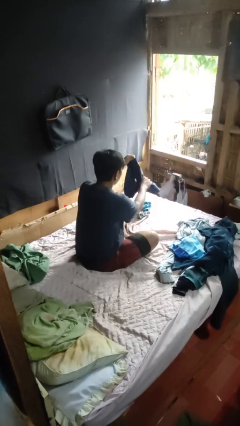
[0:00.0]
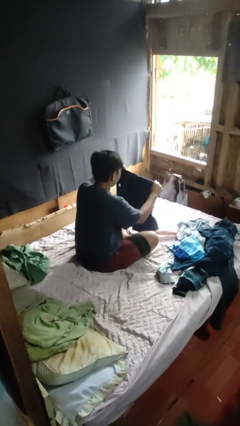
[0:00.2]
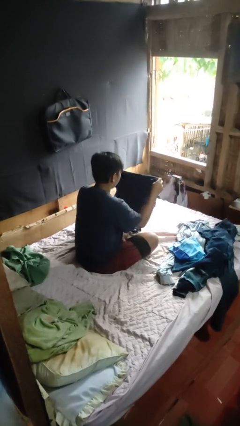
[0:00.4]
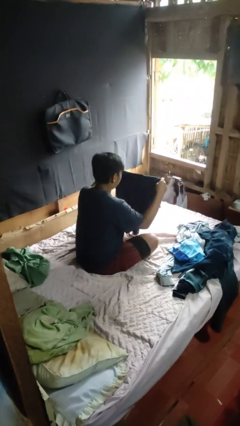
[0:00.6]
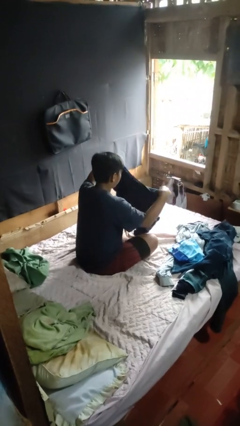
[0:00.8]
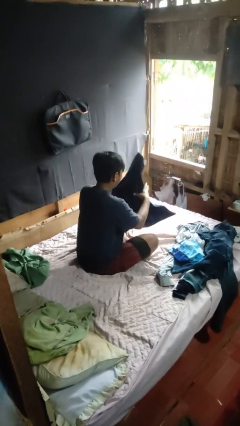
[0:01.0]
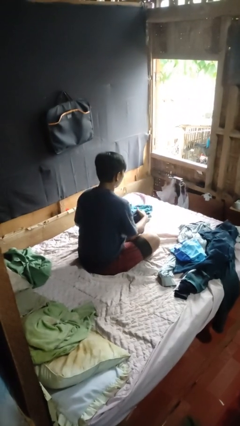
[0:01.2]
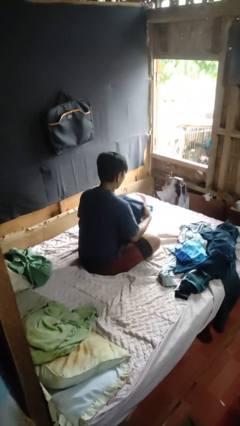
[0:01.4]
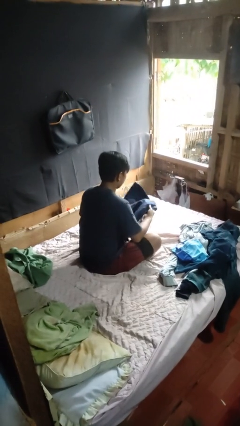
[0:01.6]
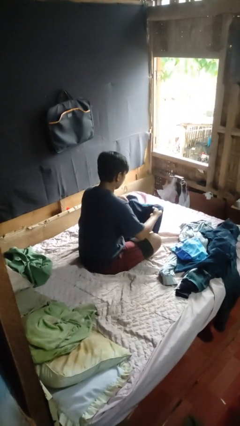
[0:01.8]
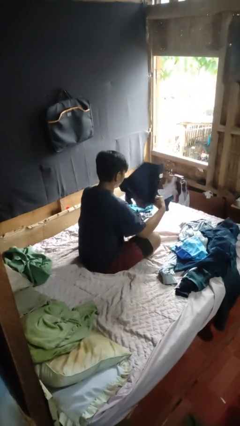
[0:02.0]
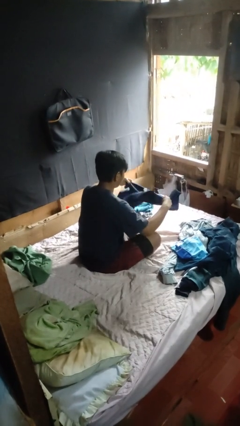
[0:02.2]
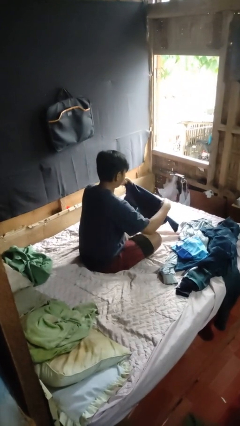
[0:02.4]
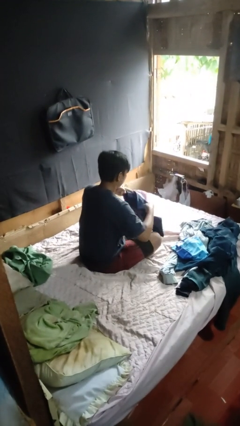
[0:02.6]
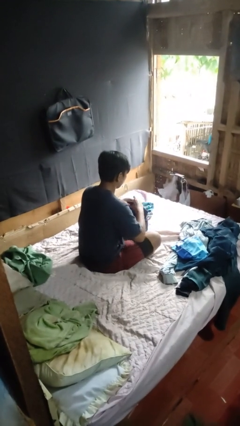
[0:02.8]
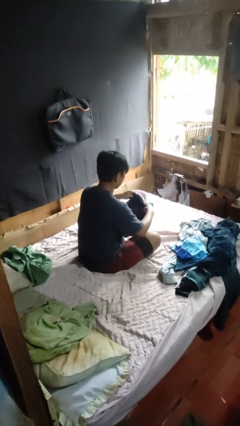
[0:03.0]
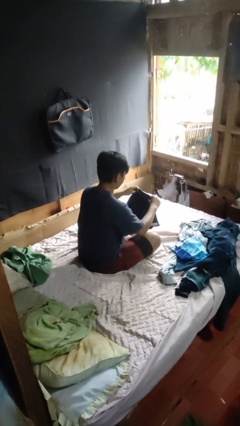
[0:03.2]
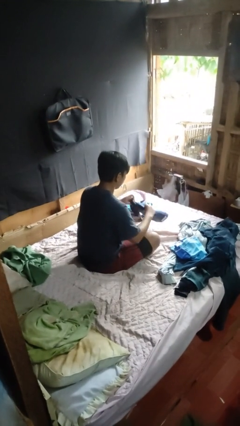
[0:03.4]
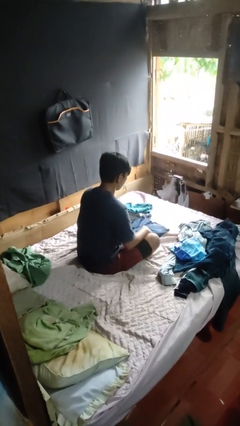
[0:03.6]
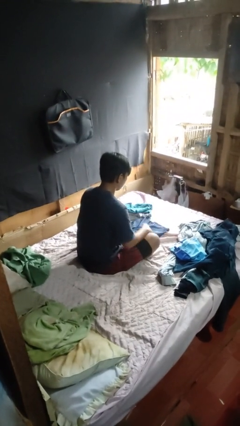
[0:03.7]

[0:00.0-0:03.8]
person folds shirt

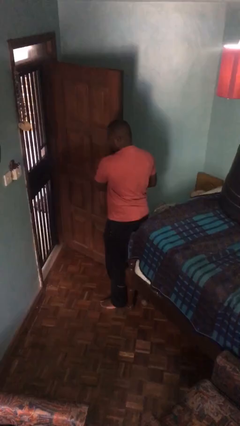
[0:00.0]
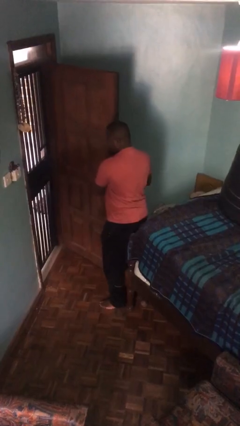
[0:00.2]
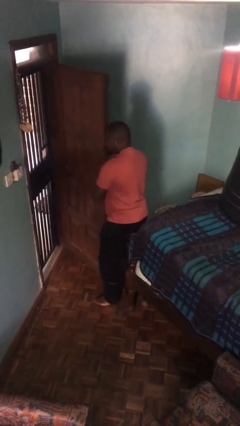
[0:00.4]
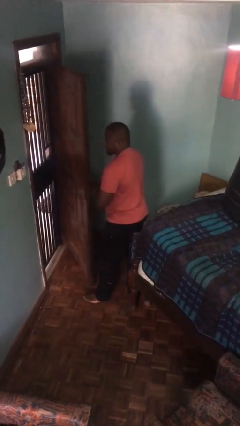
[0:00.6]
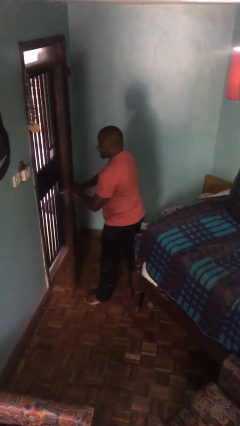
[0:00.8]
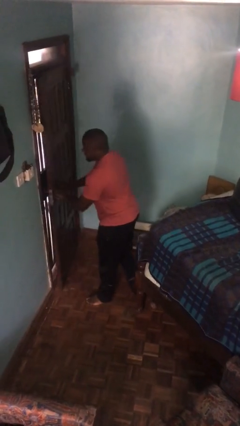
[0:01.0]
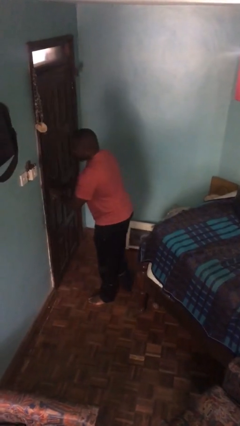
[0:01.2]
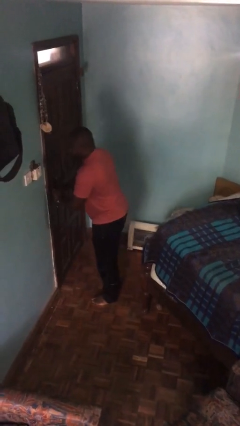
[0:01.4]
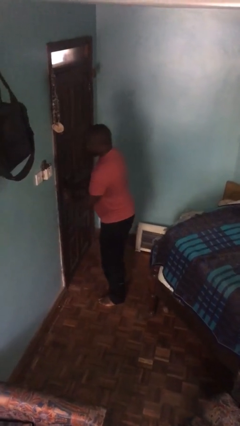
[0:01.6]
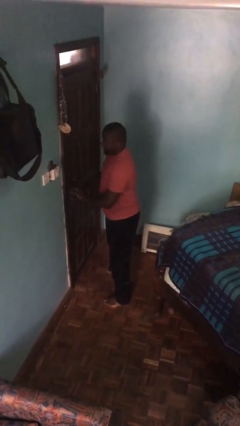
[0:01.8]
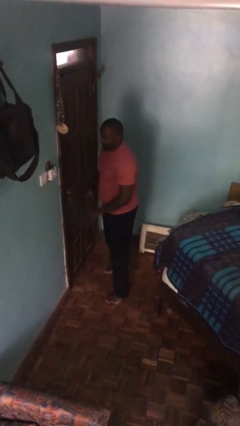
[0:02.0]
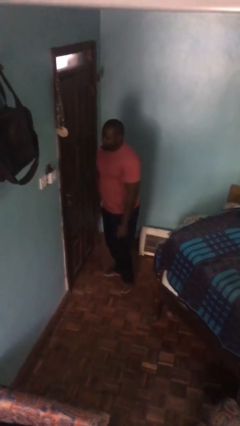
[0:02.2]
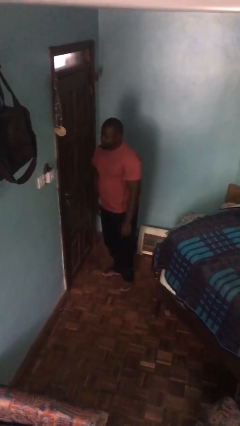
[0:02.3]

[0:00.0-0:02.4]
person closes facility door

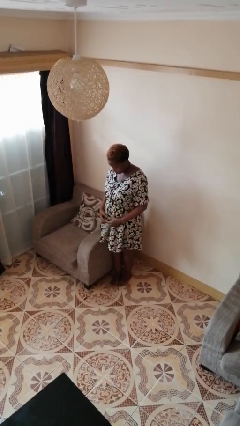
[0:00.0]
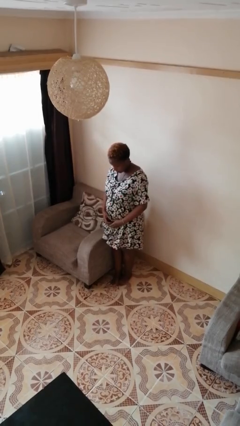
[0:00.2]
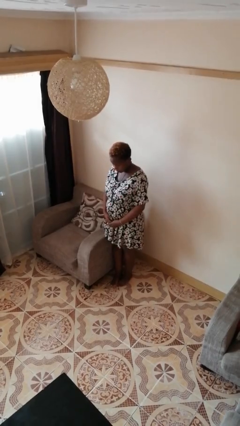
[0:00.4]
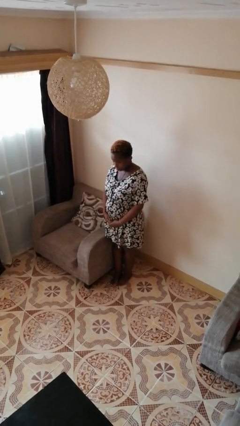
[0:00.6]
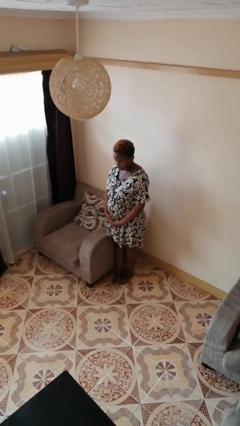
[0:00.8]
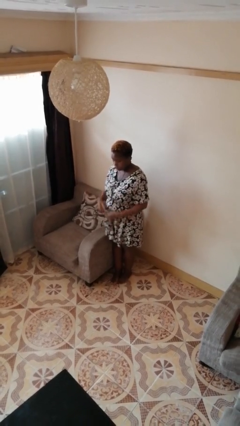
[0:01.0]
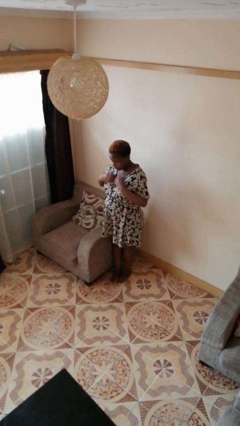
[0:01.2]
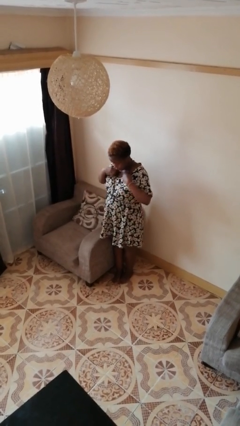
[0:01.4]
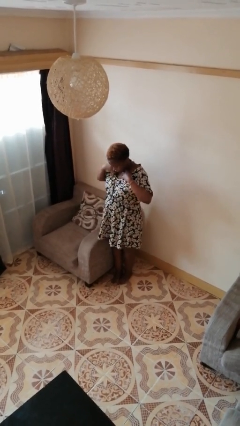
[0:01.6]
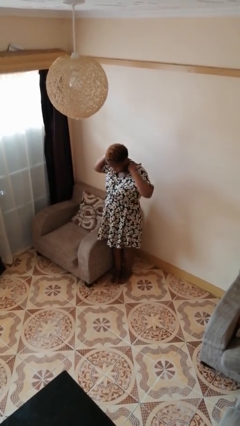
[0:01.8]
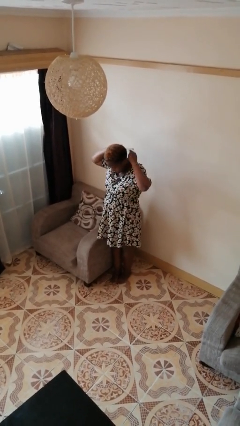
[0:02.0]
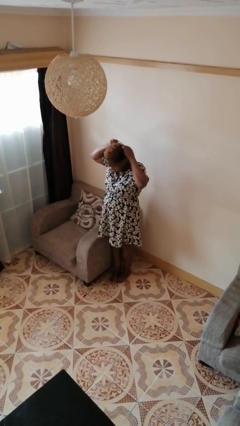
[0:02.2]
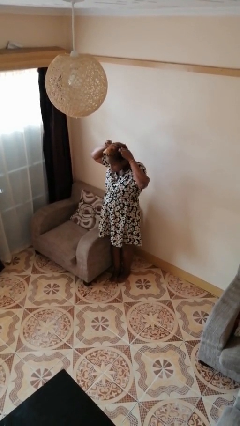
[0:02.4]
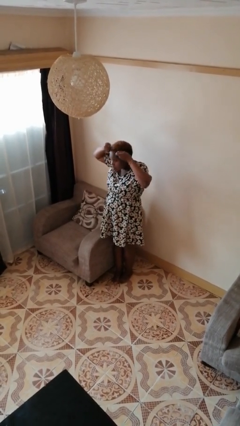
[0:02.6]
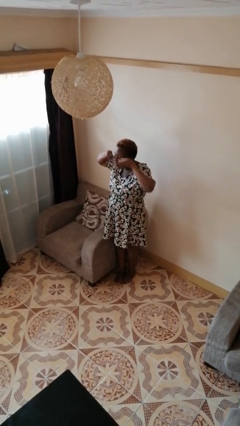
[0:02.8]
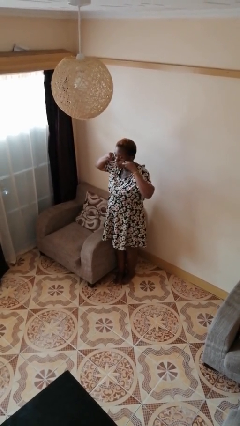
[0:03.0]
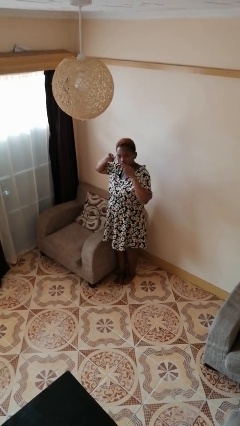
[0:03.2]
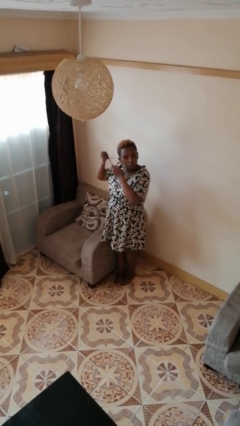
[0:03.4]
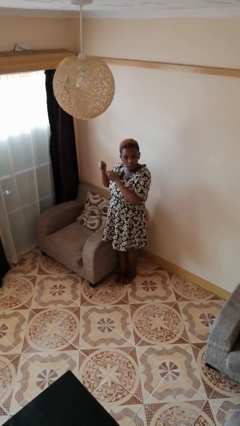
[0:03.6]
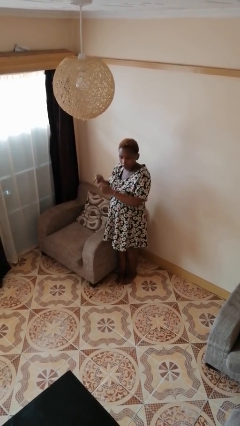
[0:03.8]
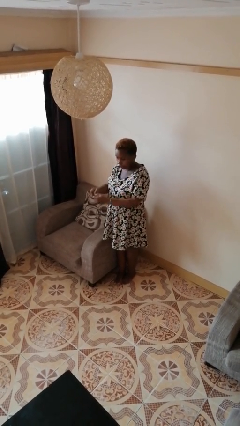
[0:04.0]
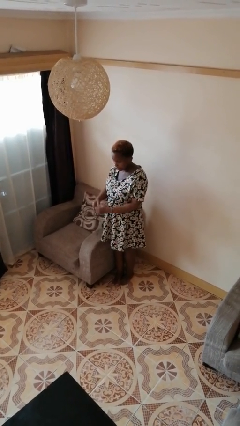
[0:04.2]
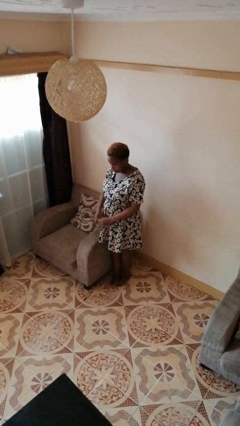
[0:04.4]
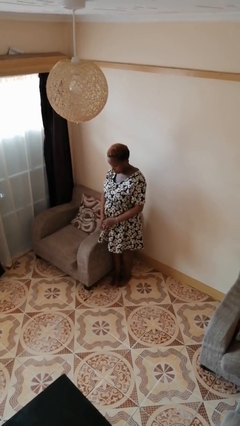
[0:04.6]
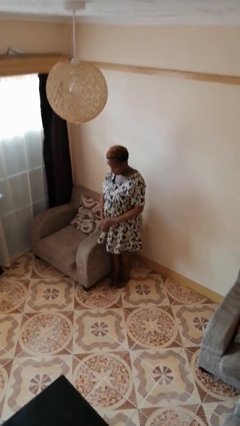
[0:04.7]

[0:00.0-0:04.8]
person takes off necklace

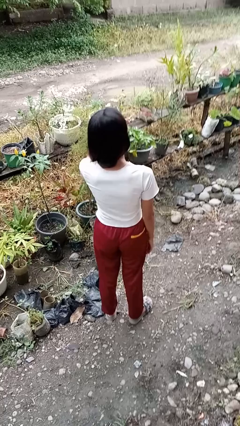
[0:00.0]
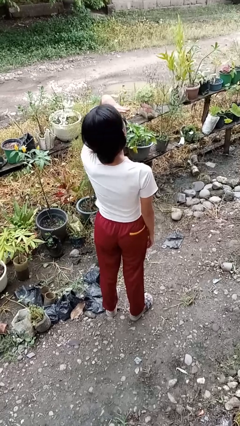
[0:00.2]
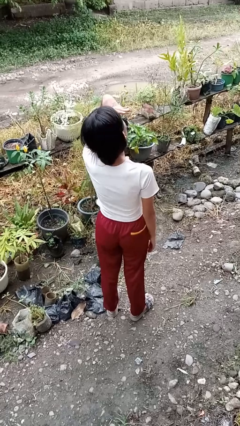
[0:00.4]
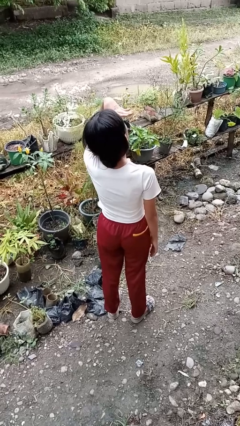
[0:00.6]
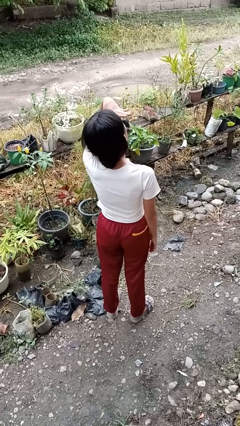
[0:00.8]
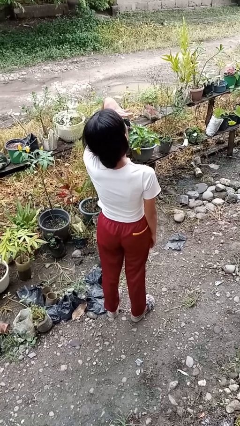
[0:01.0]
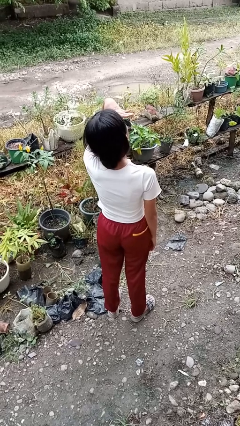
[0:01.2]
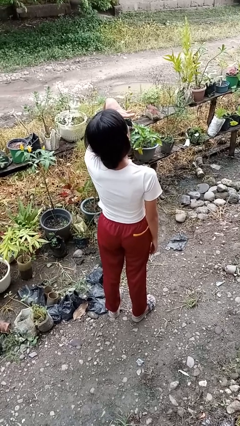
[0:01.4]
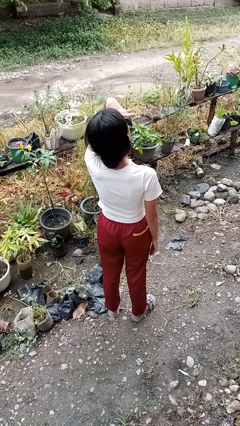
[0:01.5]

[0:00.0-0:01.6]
person shades eyes

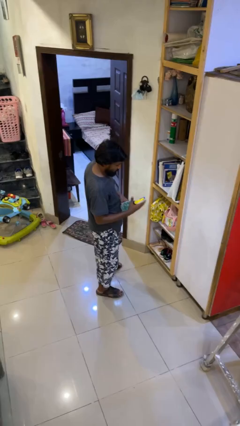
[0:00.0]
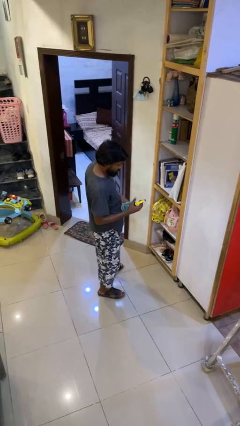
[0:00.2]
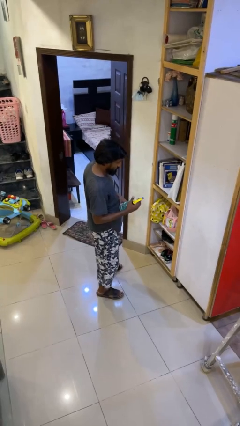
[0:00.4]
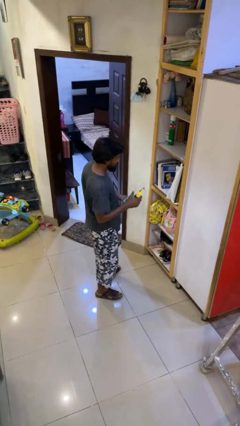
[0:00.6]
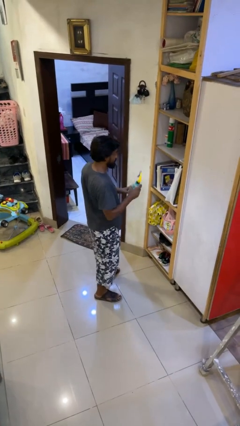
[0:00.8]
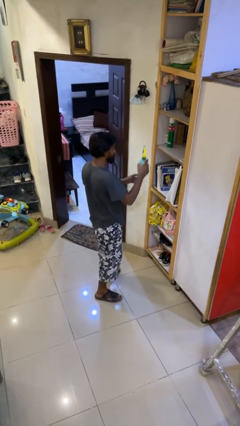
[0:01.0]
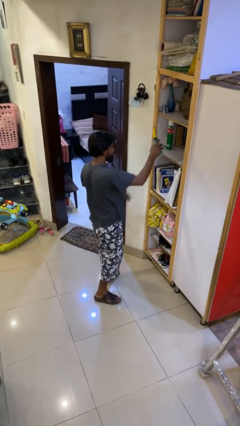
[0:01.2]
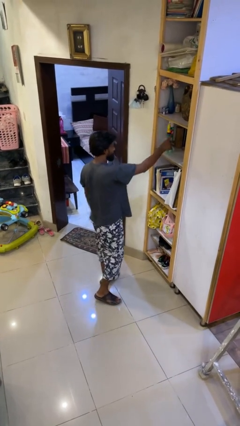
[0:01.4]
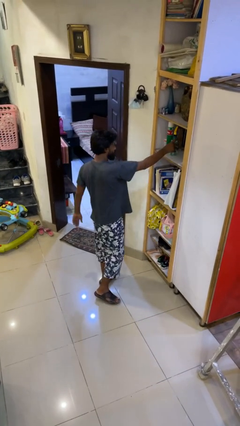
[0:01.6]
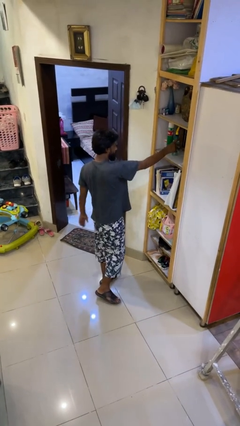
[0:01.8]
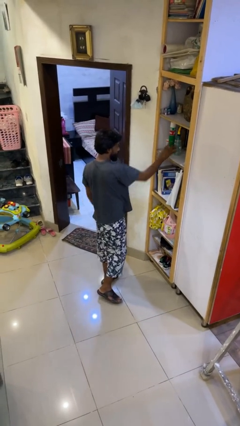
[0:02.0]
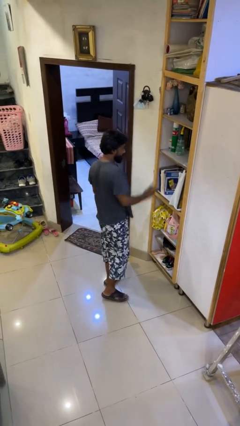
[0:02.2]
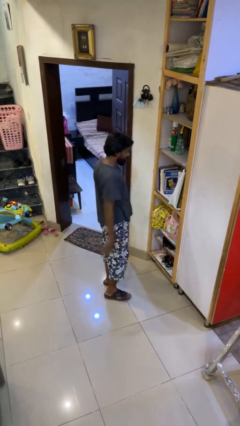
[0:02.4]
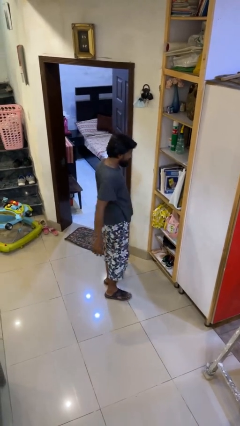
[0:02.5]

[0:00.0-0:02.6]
person puts down object into cabinet

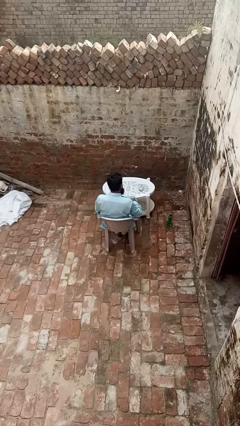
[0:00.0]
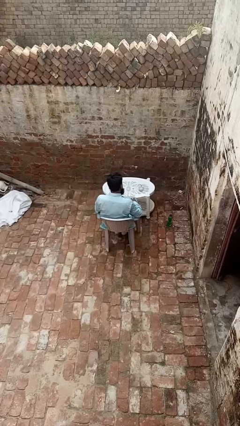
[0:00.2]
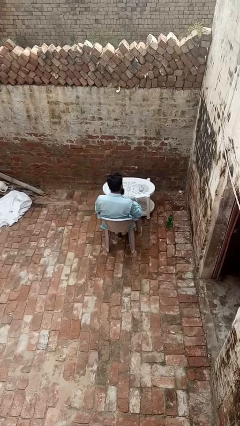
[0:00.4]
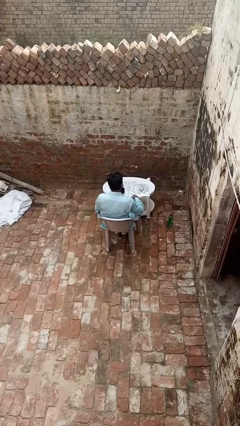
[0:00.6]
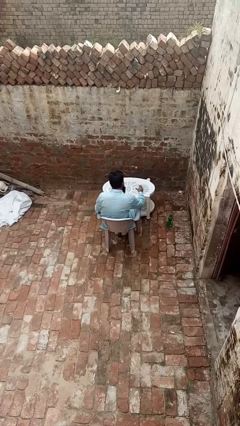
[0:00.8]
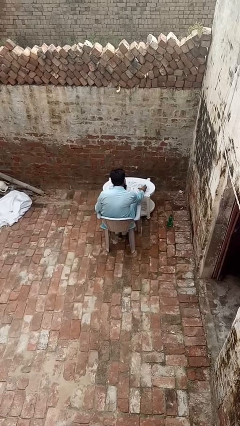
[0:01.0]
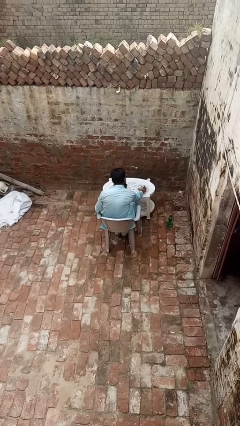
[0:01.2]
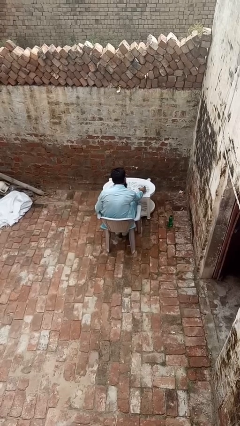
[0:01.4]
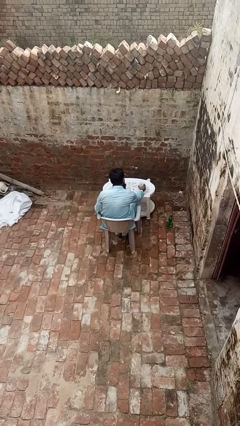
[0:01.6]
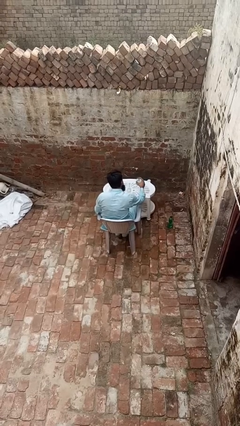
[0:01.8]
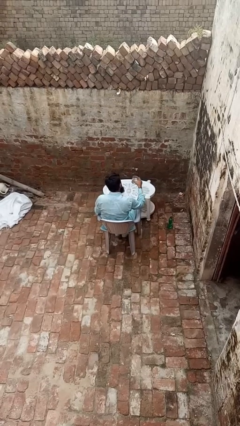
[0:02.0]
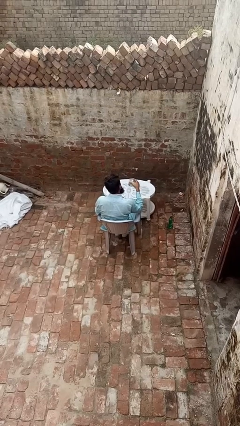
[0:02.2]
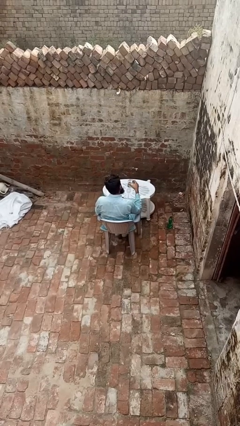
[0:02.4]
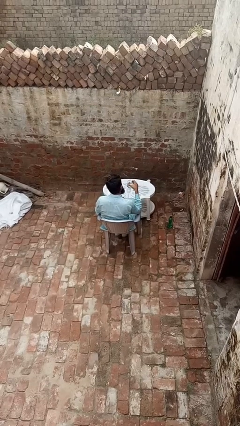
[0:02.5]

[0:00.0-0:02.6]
person picks up object from table

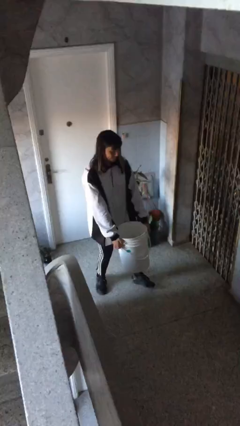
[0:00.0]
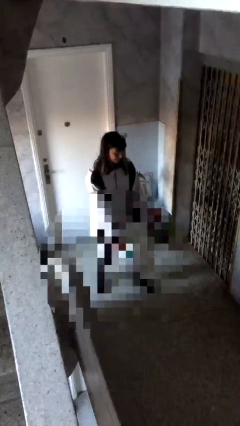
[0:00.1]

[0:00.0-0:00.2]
person puts down object on floor
